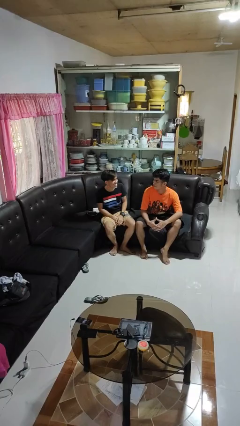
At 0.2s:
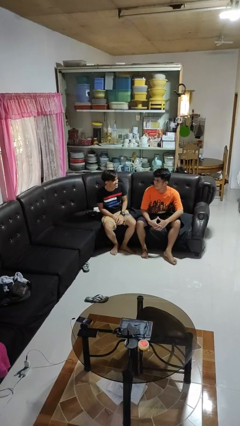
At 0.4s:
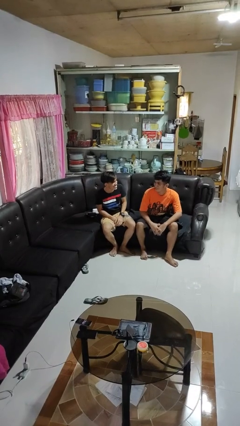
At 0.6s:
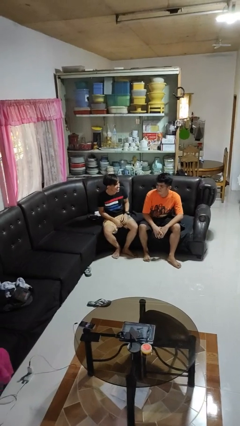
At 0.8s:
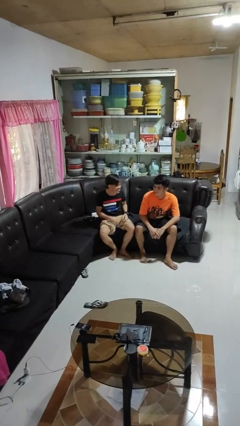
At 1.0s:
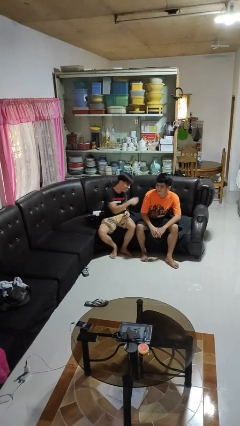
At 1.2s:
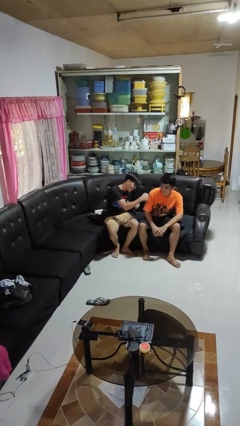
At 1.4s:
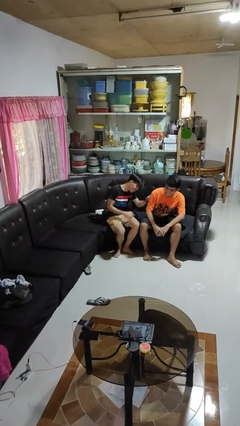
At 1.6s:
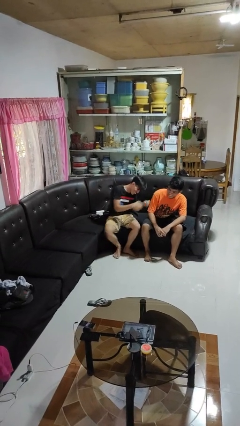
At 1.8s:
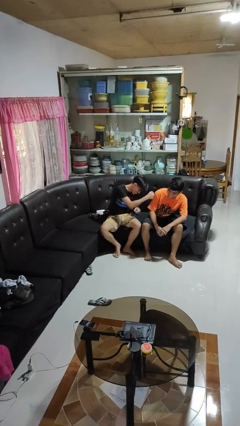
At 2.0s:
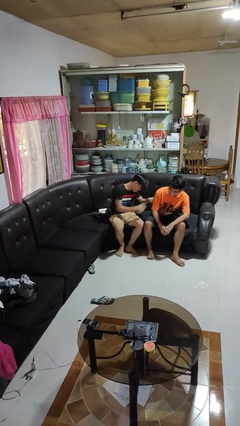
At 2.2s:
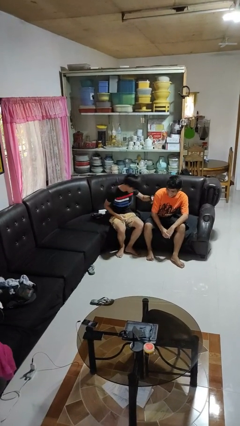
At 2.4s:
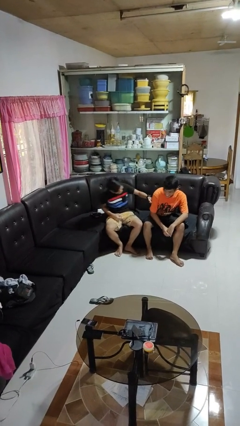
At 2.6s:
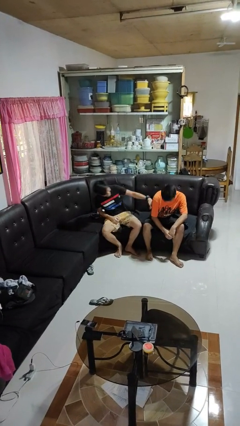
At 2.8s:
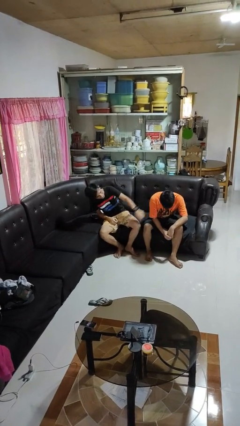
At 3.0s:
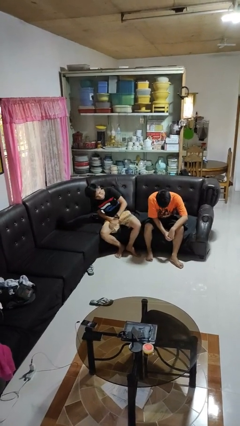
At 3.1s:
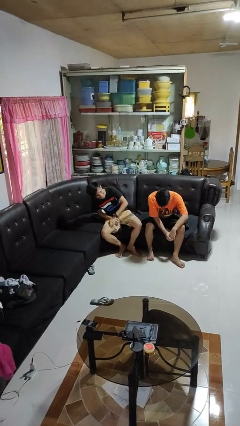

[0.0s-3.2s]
person pounds shoulders of person

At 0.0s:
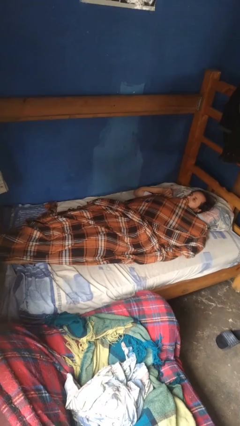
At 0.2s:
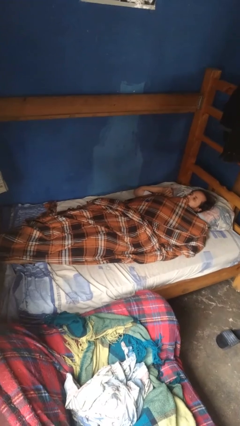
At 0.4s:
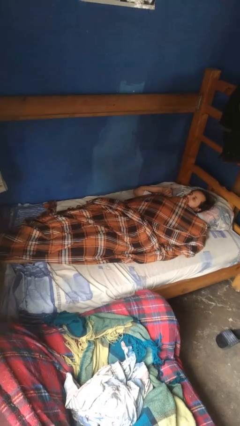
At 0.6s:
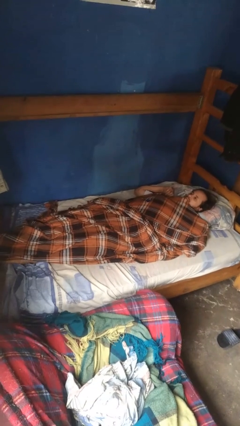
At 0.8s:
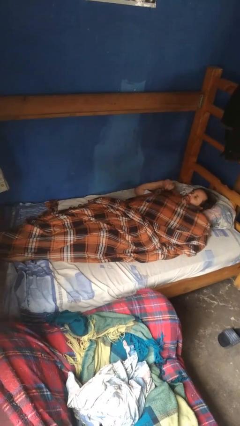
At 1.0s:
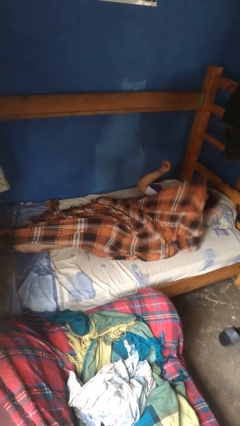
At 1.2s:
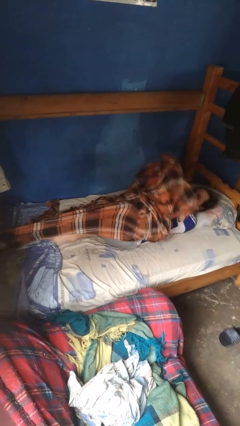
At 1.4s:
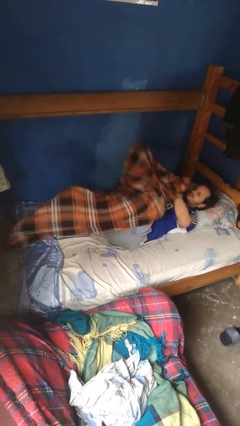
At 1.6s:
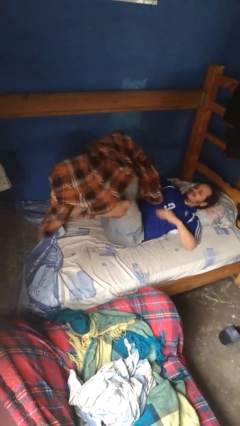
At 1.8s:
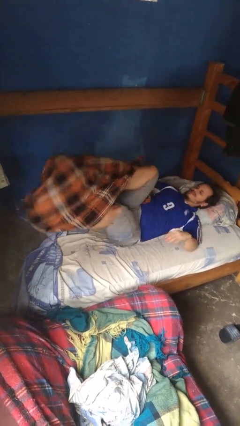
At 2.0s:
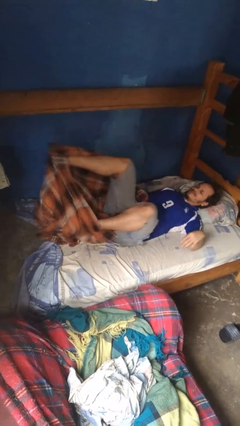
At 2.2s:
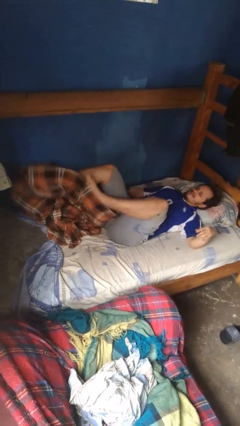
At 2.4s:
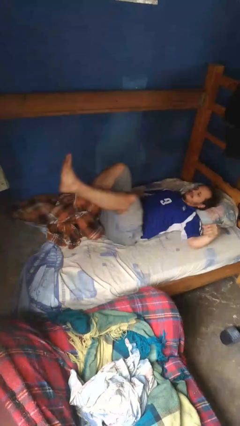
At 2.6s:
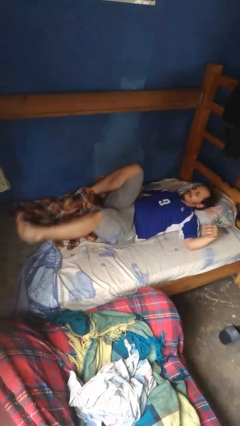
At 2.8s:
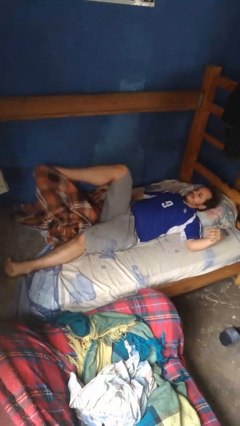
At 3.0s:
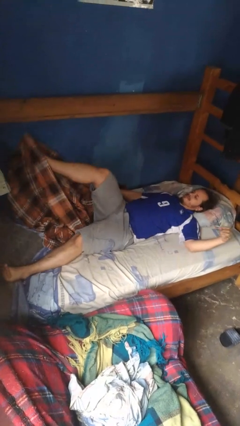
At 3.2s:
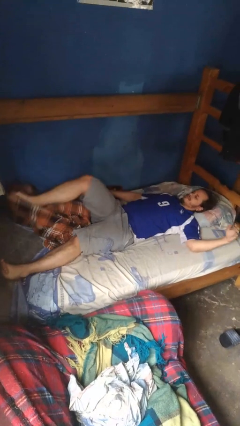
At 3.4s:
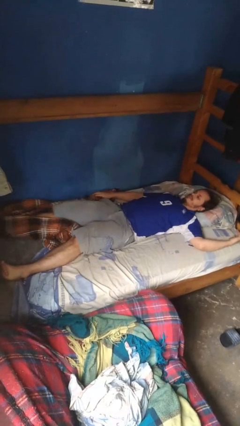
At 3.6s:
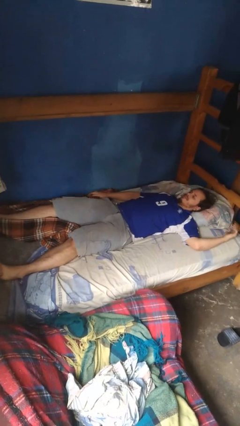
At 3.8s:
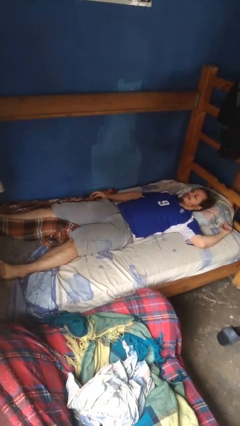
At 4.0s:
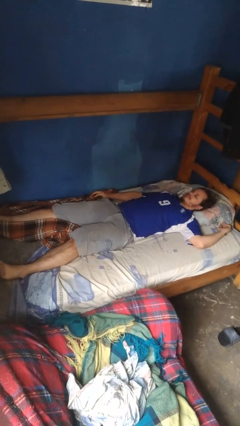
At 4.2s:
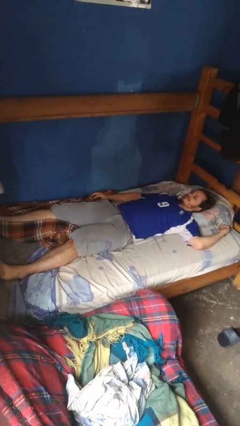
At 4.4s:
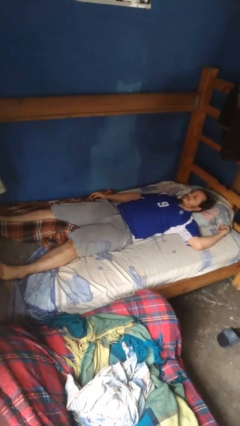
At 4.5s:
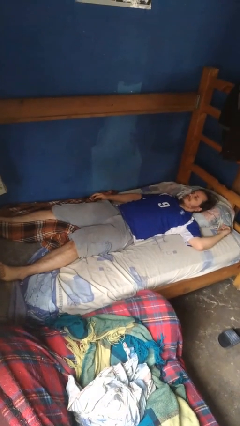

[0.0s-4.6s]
person uncovers with bedsheets

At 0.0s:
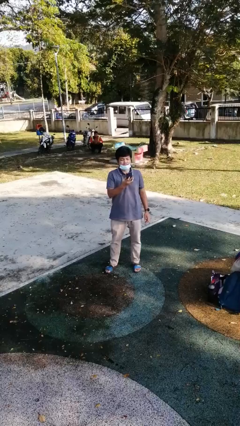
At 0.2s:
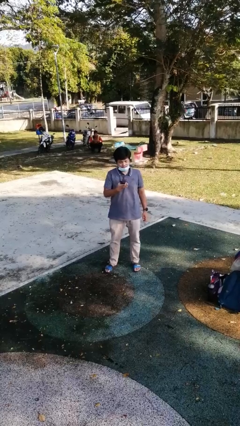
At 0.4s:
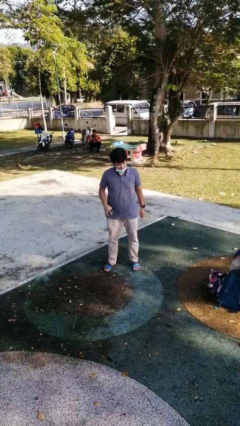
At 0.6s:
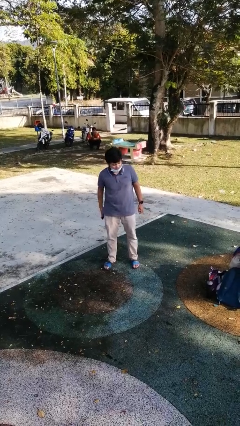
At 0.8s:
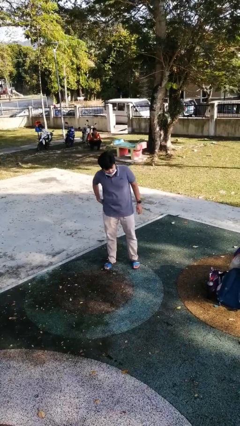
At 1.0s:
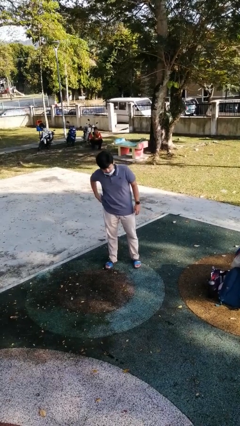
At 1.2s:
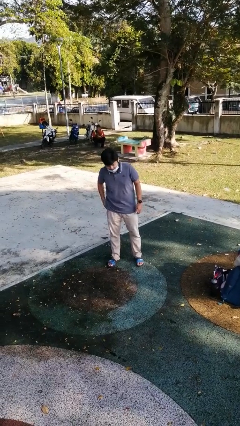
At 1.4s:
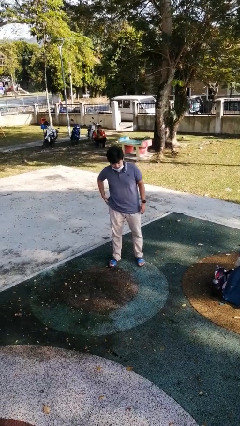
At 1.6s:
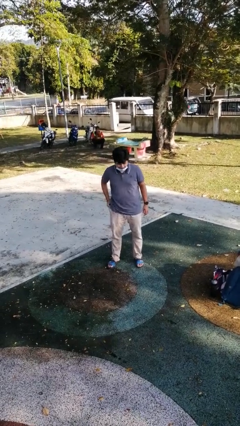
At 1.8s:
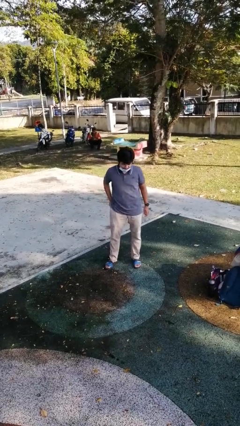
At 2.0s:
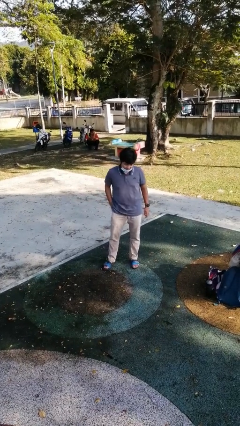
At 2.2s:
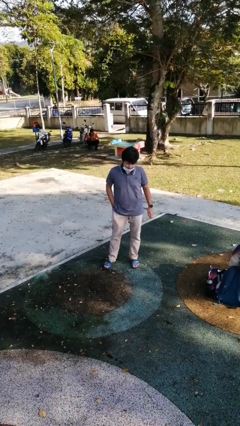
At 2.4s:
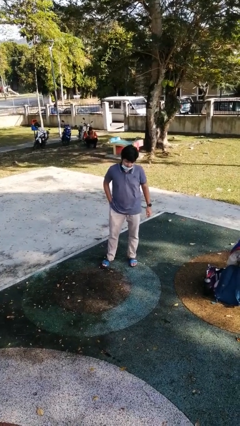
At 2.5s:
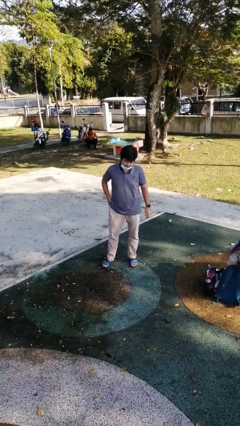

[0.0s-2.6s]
person puts phone into pocket

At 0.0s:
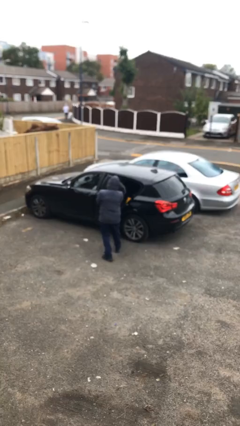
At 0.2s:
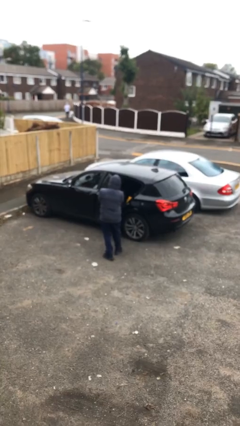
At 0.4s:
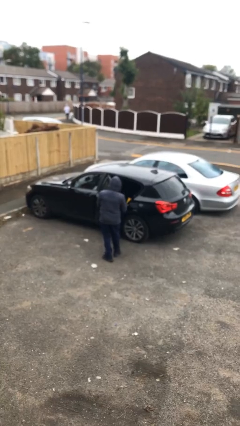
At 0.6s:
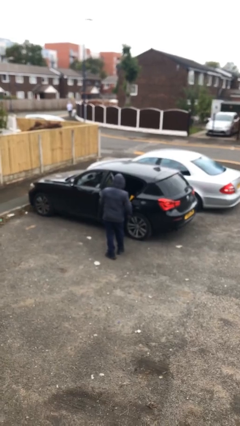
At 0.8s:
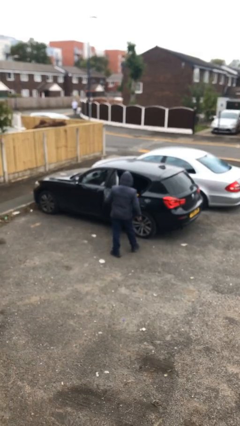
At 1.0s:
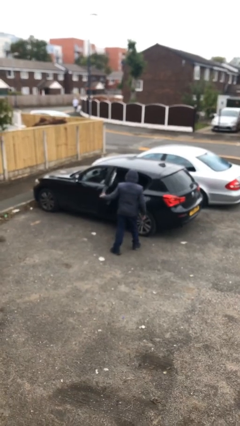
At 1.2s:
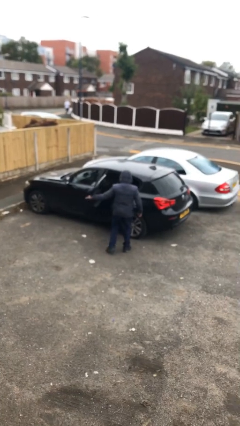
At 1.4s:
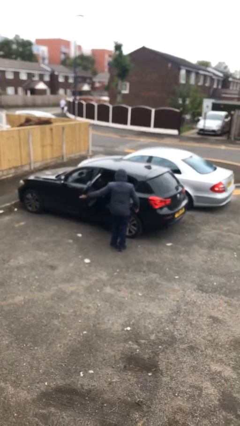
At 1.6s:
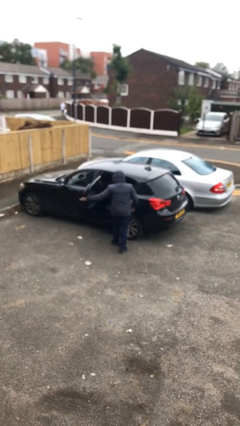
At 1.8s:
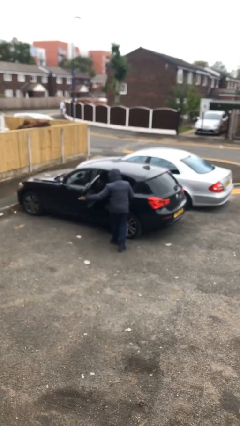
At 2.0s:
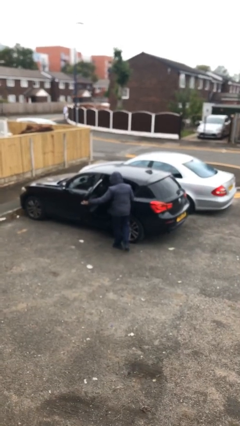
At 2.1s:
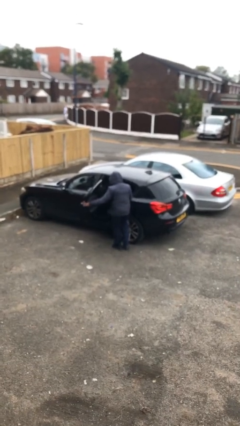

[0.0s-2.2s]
person opens car door

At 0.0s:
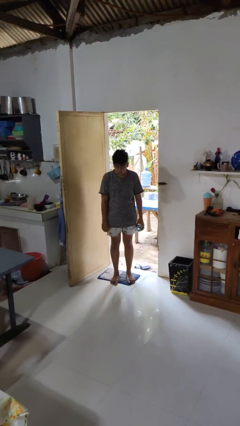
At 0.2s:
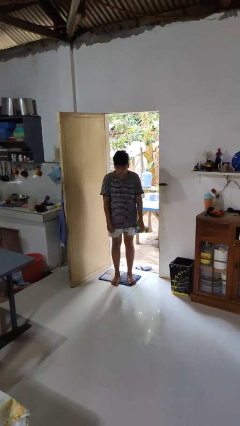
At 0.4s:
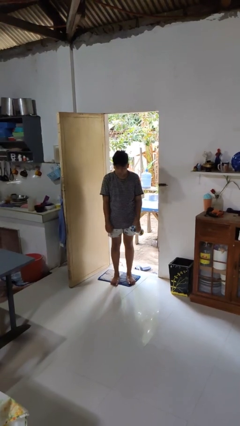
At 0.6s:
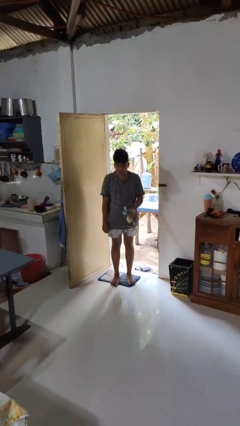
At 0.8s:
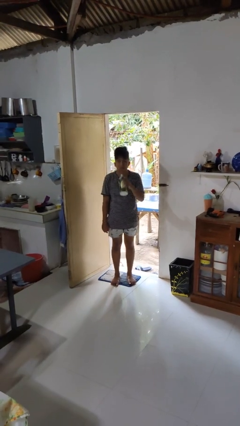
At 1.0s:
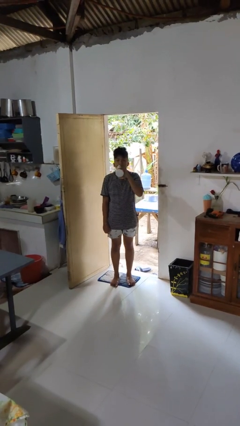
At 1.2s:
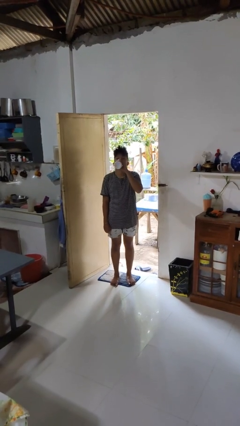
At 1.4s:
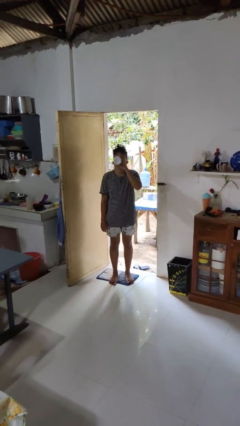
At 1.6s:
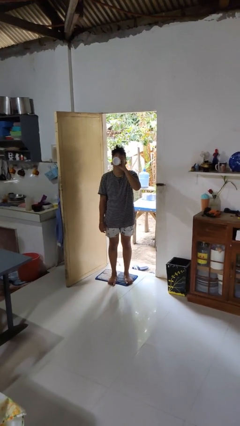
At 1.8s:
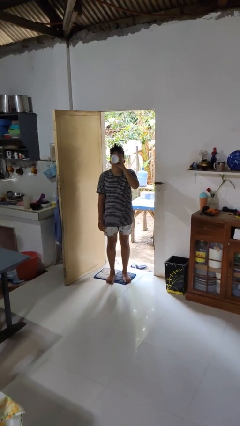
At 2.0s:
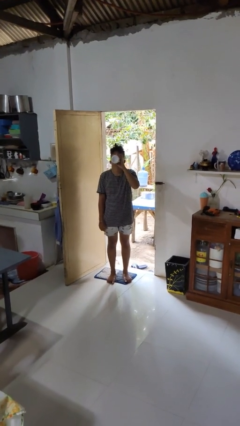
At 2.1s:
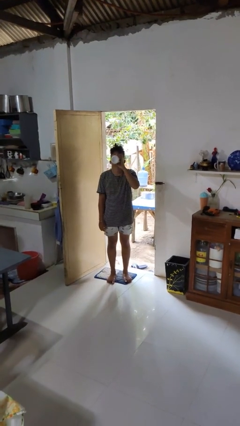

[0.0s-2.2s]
person drinks from bottle

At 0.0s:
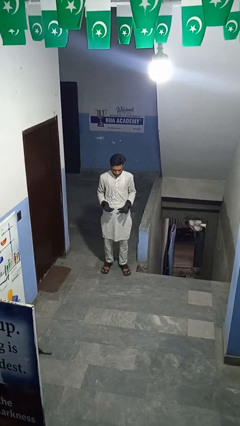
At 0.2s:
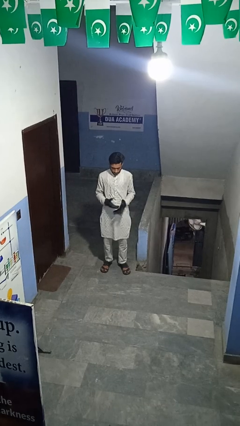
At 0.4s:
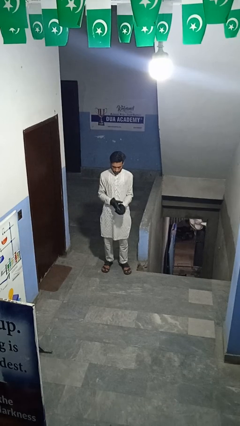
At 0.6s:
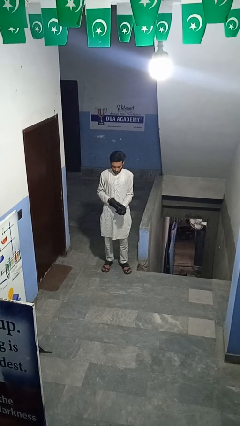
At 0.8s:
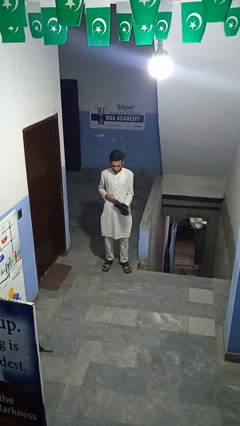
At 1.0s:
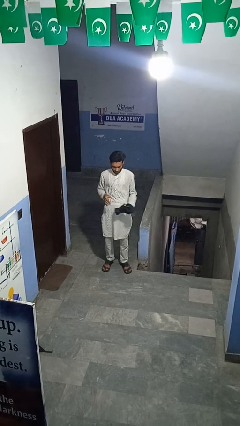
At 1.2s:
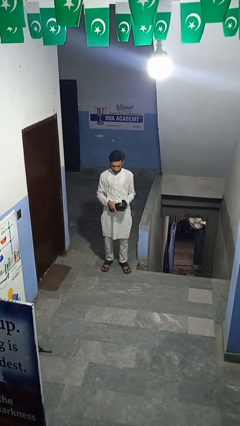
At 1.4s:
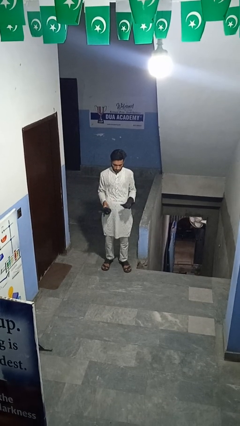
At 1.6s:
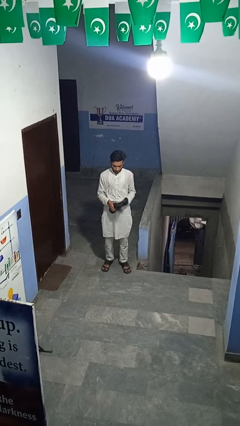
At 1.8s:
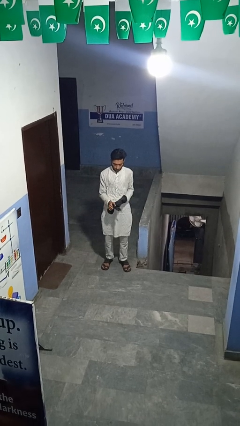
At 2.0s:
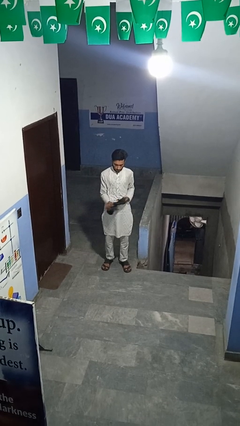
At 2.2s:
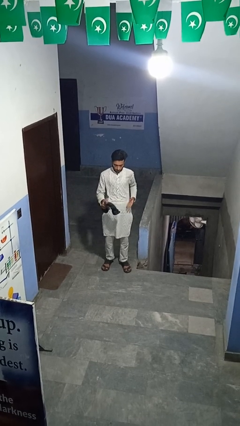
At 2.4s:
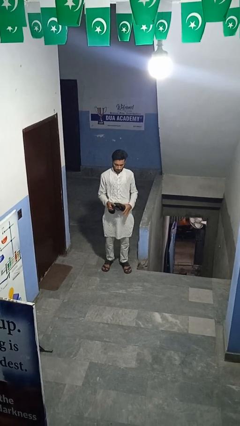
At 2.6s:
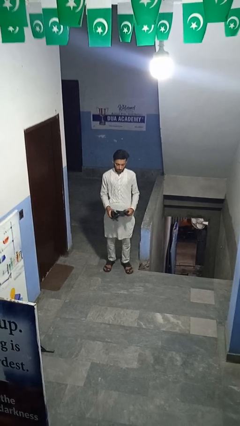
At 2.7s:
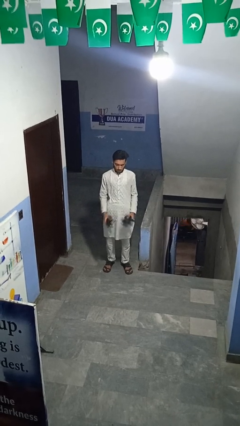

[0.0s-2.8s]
person takes off gloves

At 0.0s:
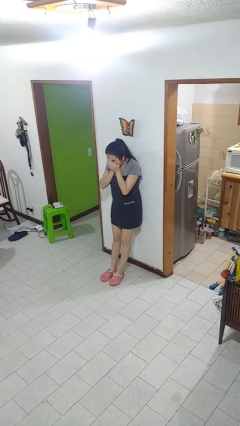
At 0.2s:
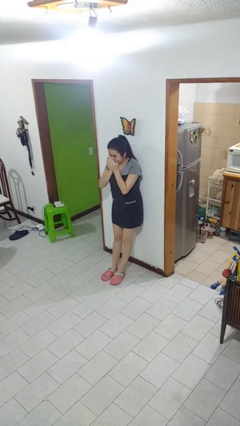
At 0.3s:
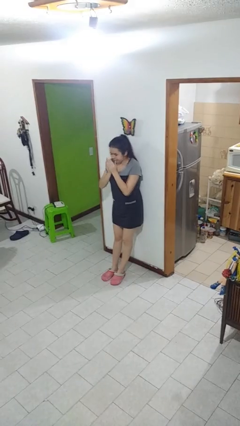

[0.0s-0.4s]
person sneezes into hand
